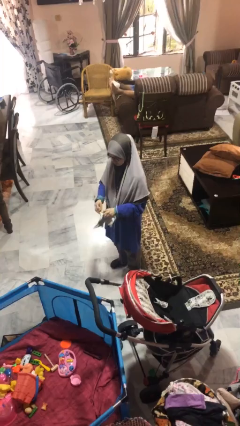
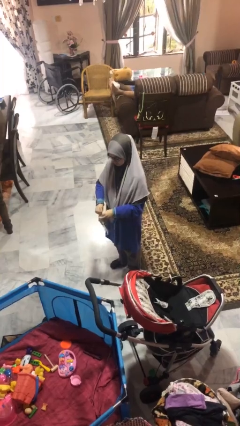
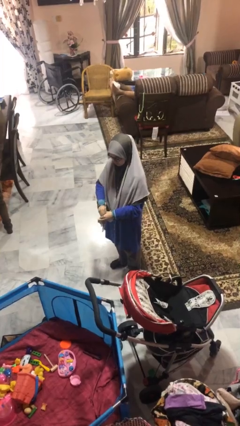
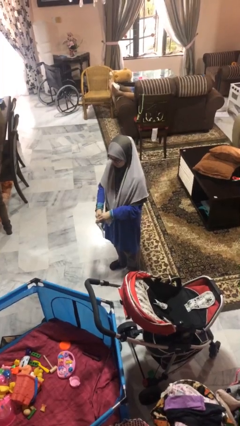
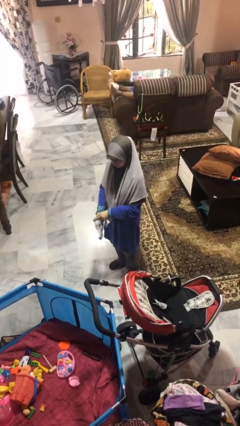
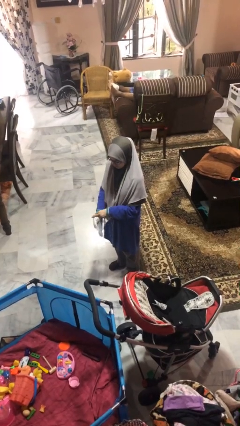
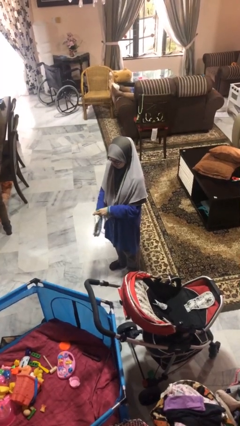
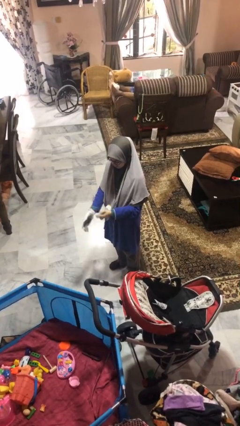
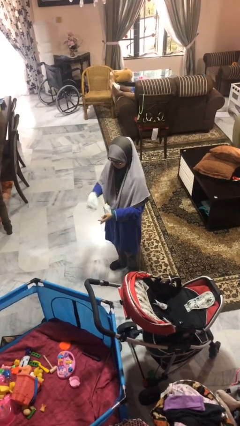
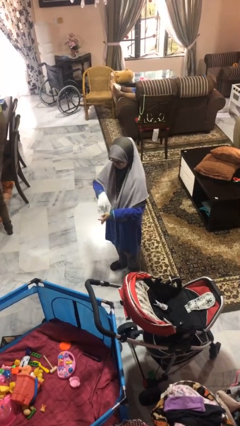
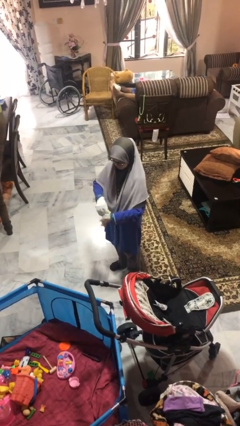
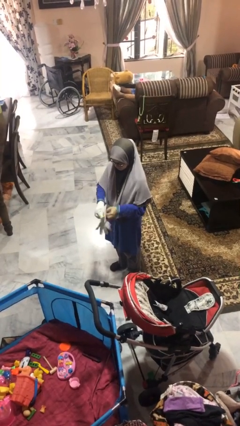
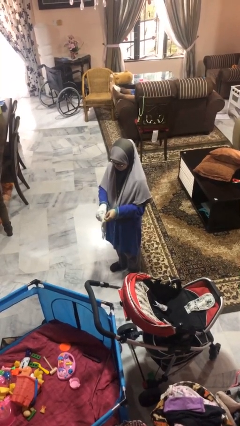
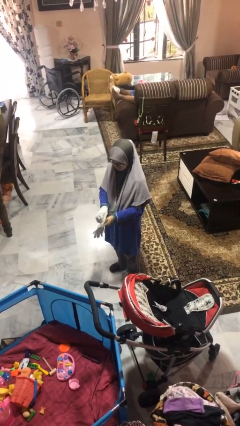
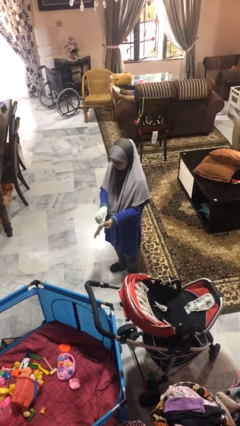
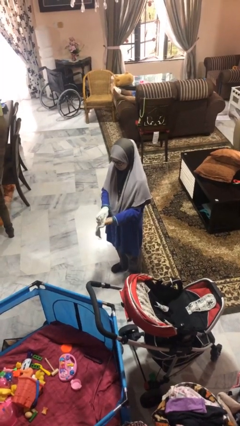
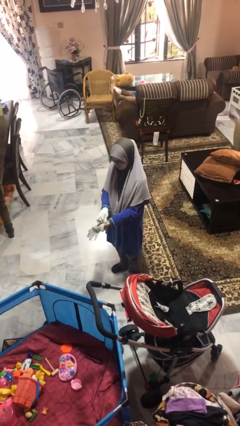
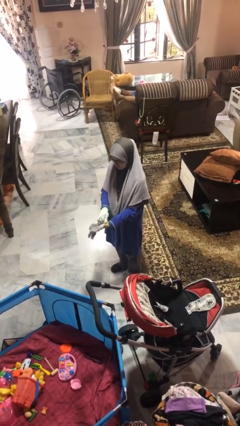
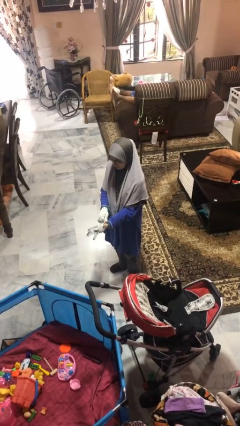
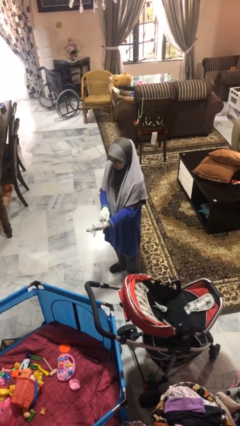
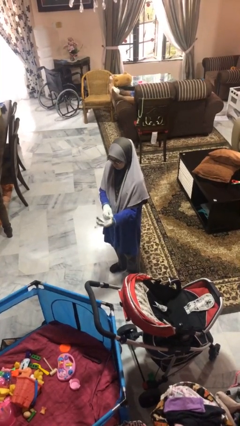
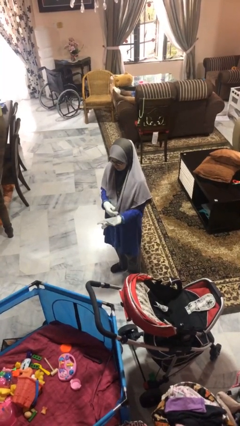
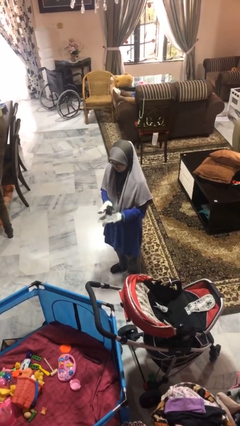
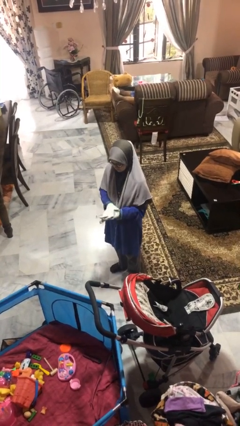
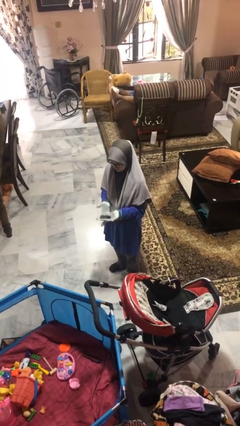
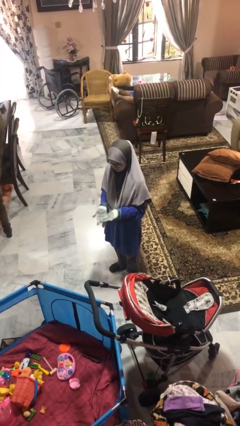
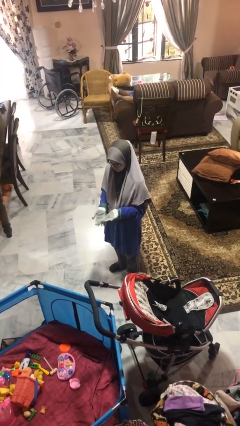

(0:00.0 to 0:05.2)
person puts on gloves

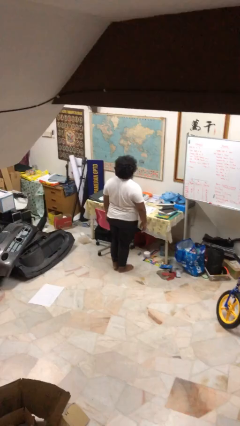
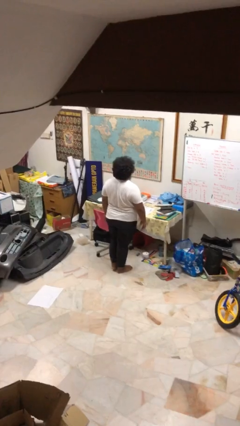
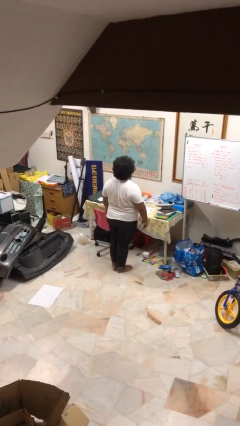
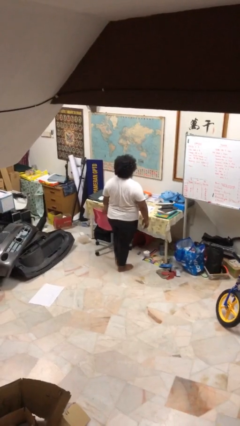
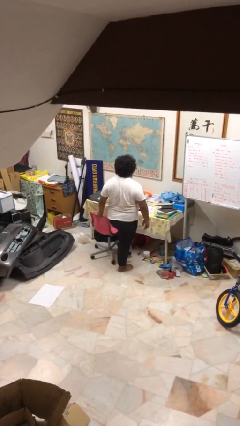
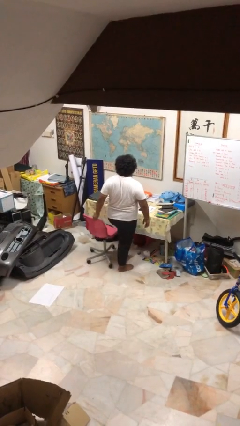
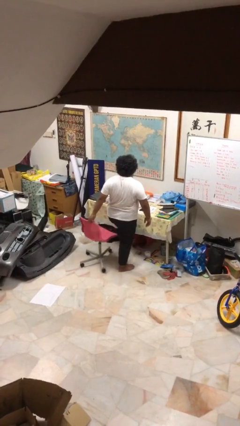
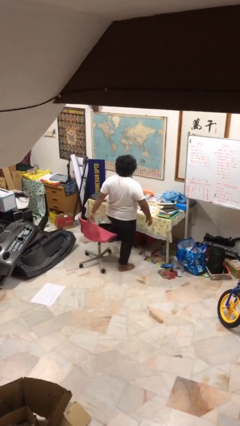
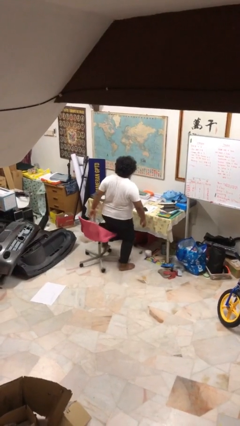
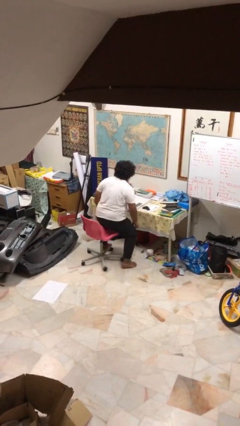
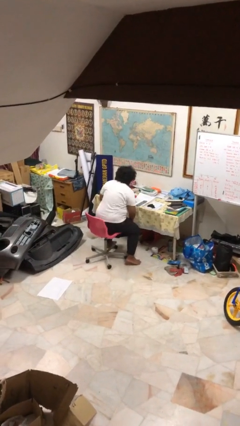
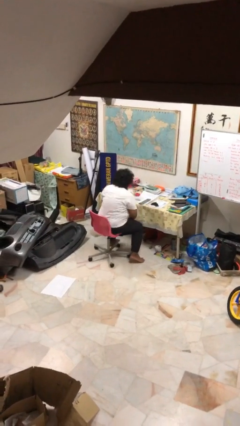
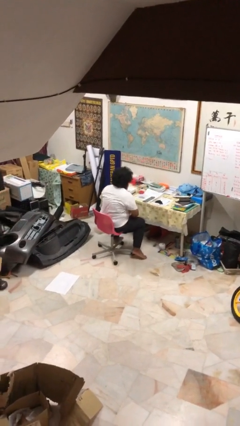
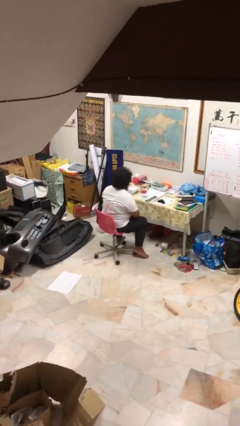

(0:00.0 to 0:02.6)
person sits down

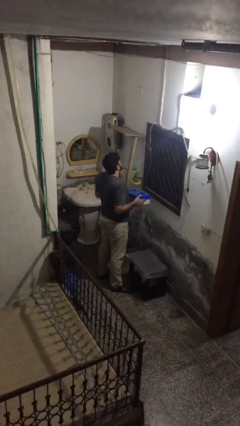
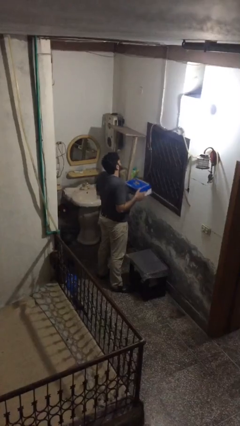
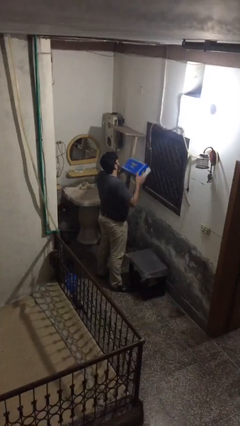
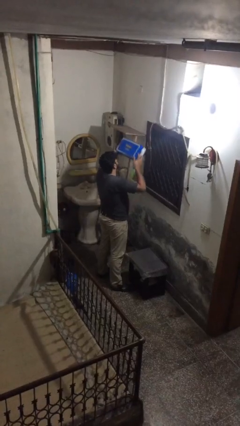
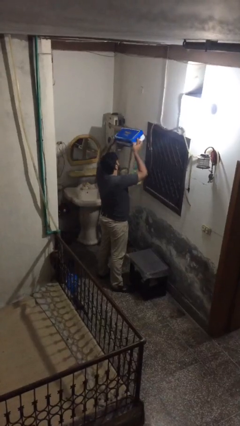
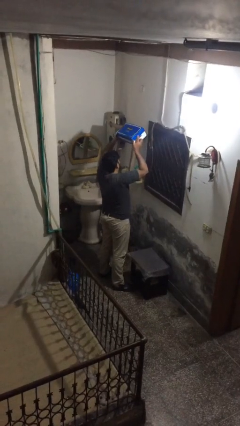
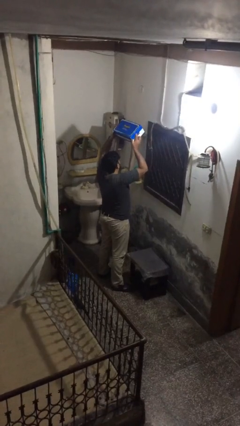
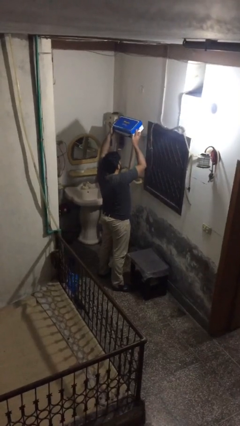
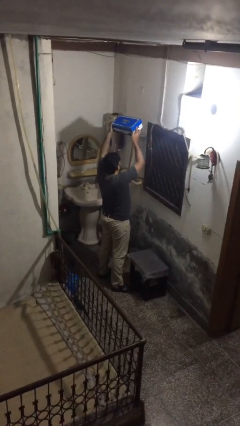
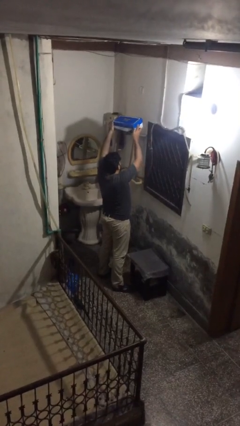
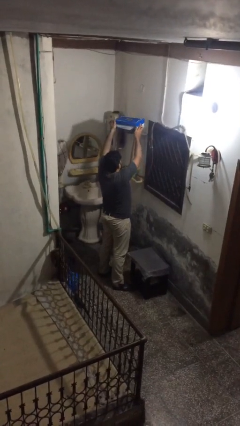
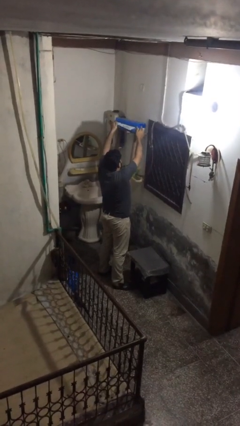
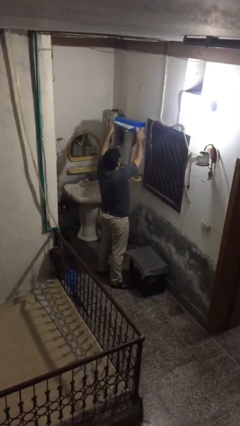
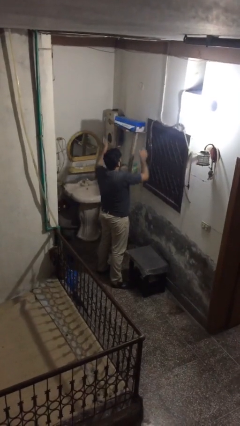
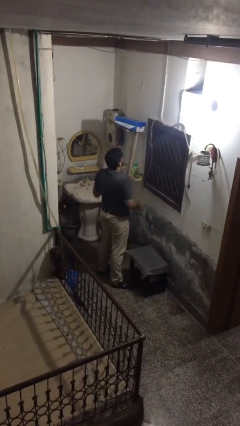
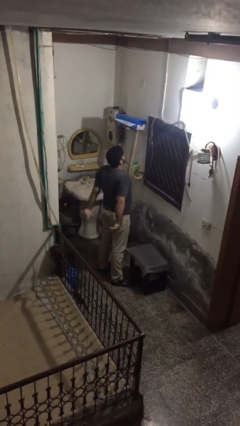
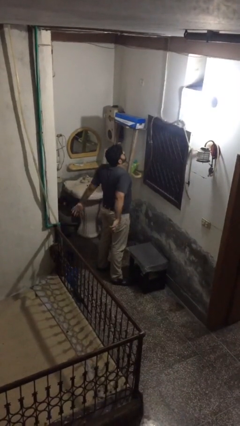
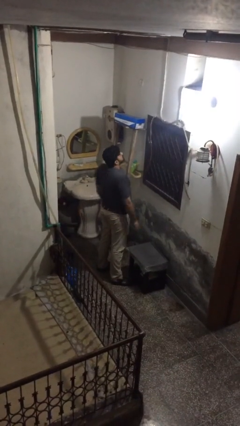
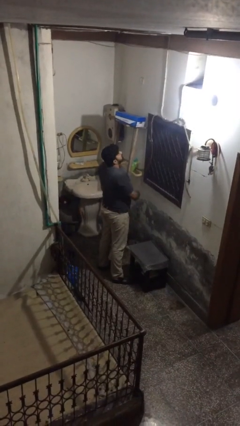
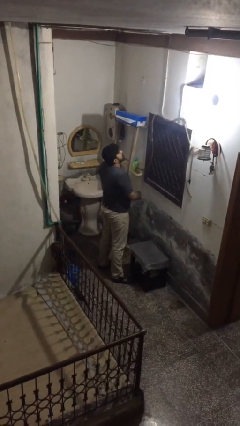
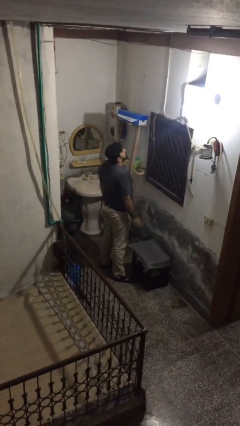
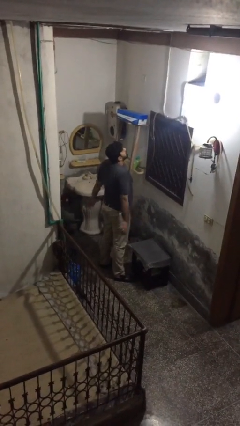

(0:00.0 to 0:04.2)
person puts down object on shelf

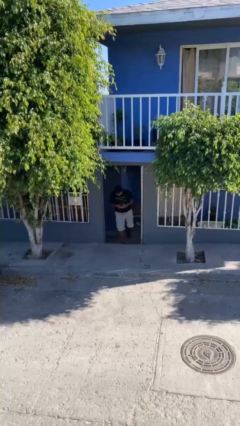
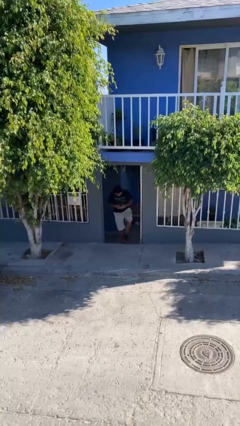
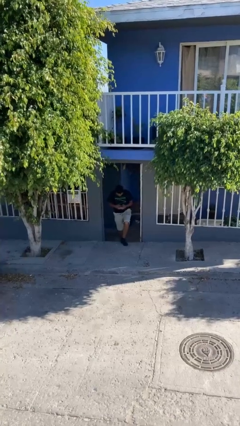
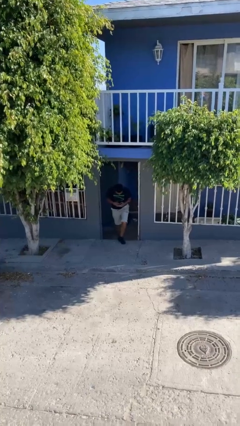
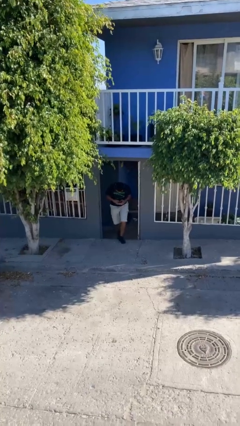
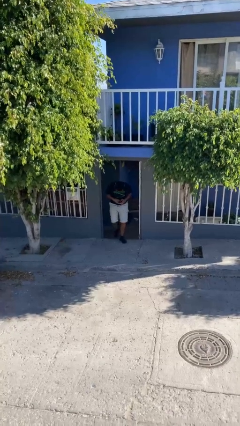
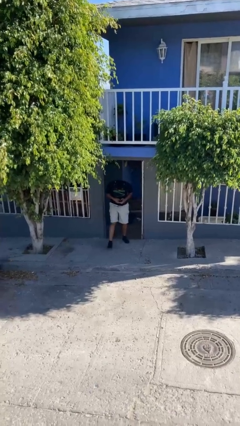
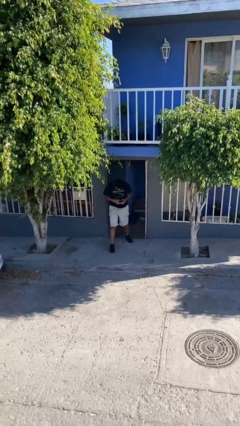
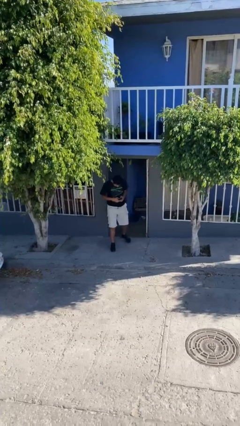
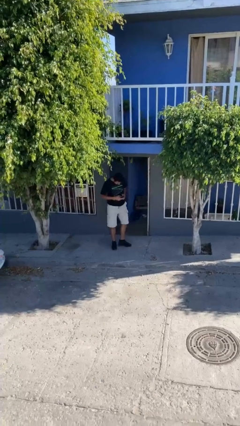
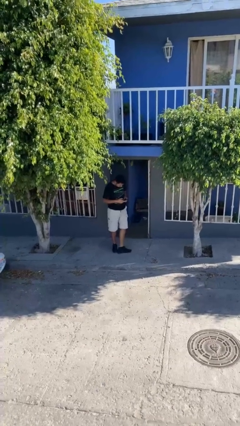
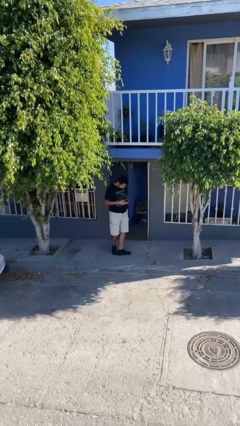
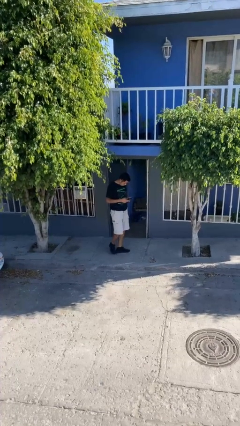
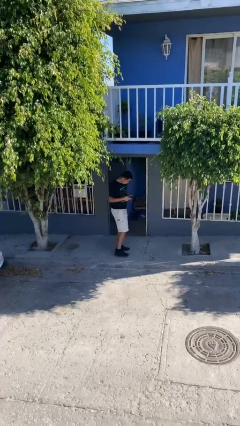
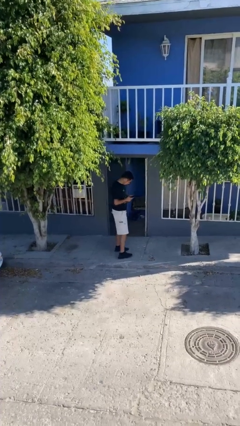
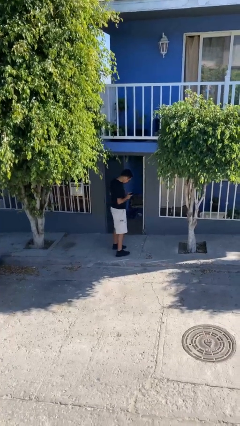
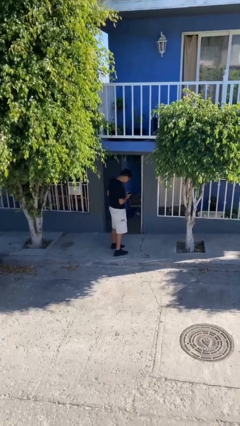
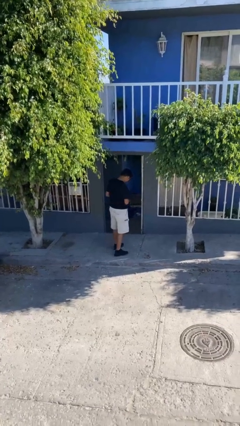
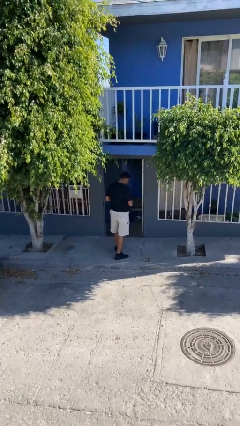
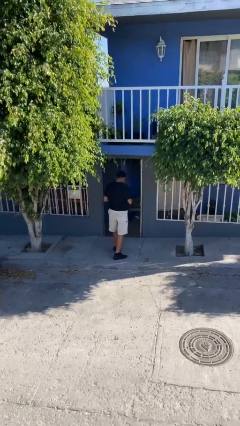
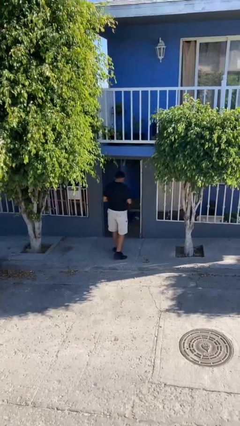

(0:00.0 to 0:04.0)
person enters scene through structure

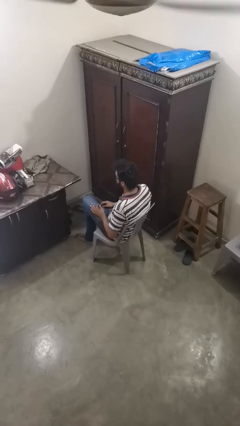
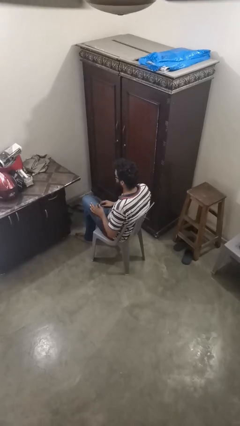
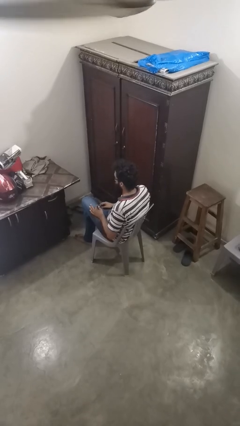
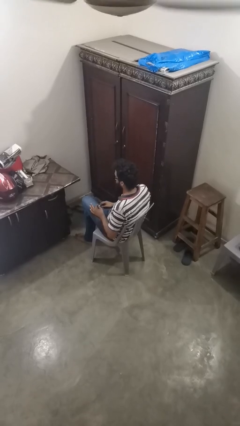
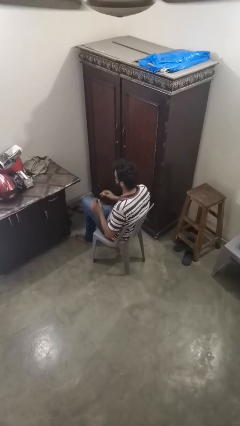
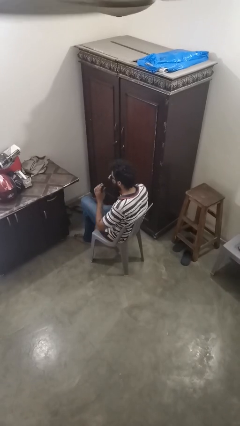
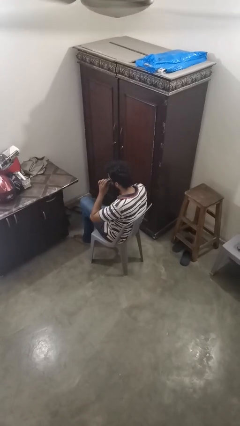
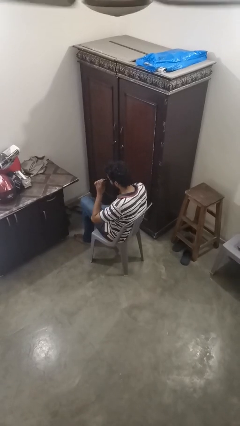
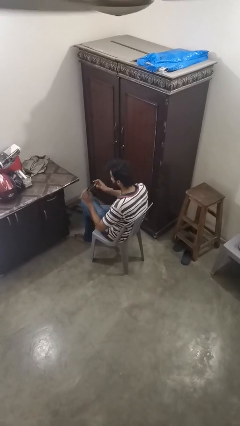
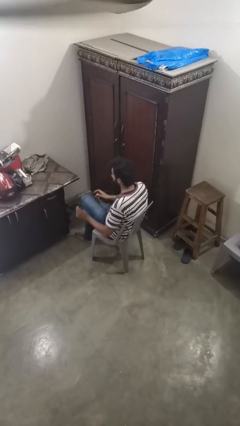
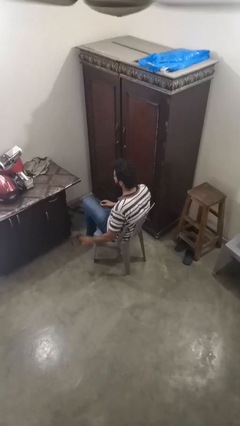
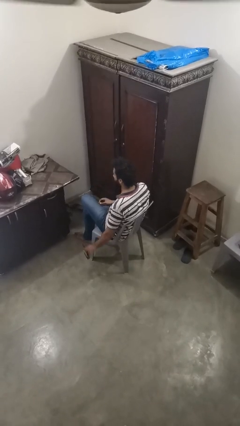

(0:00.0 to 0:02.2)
person takes off sunglasses
